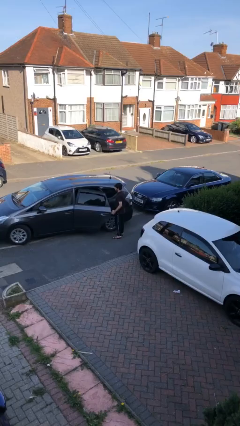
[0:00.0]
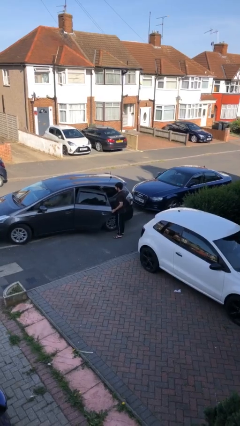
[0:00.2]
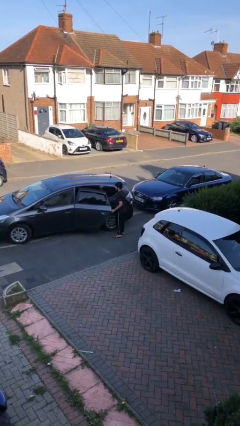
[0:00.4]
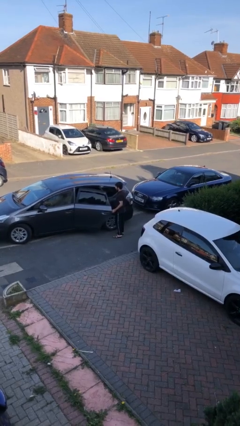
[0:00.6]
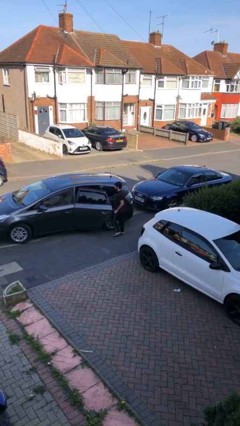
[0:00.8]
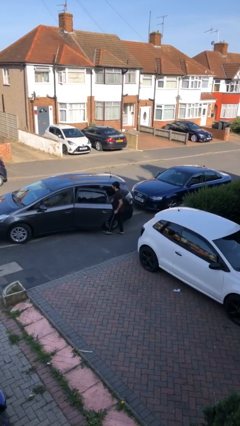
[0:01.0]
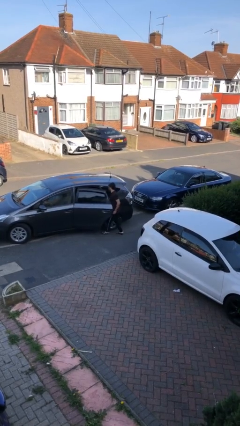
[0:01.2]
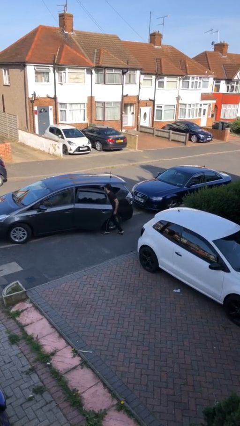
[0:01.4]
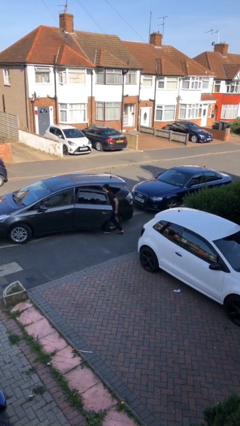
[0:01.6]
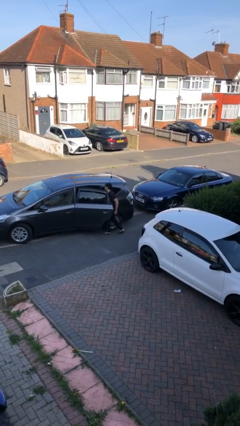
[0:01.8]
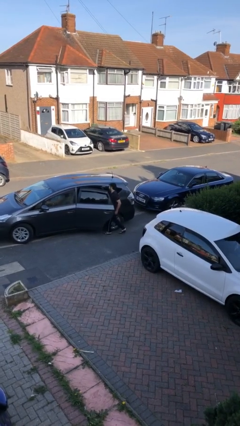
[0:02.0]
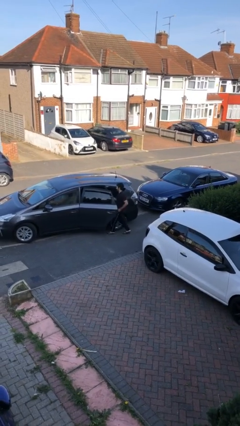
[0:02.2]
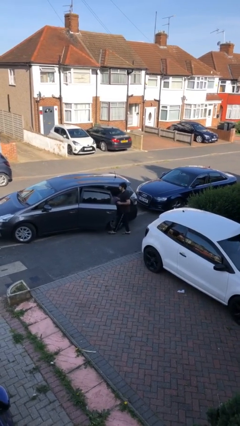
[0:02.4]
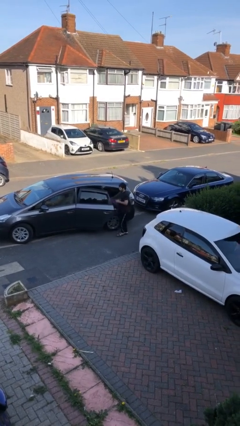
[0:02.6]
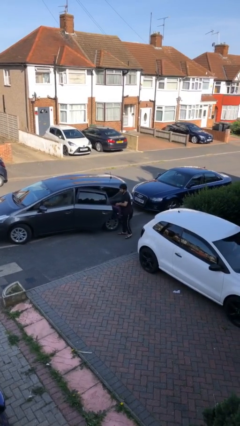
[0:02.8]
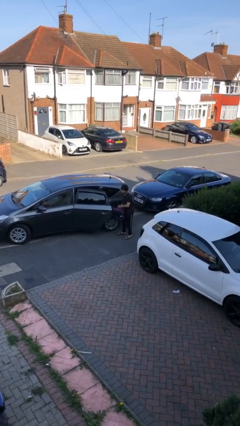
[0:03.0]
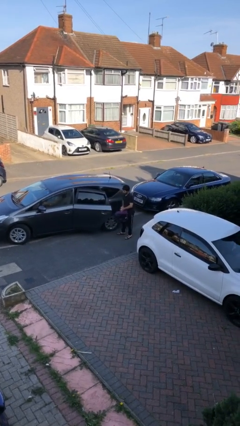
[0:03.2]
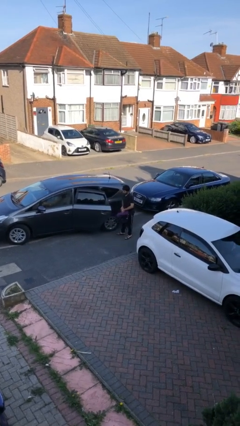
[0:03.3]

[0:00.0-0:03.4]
person unloads car

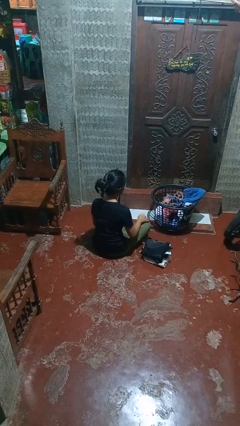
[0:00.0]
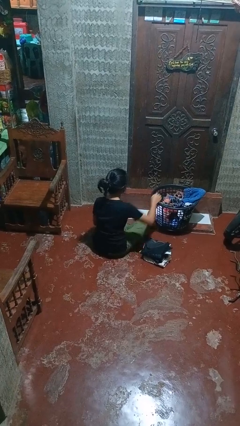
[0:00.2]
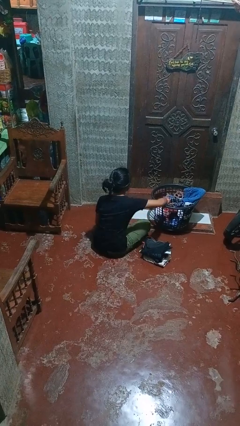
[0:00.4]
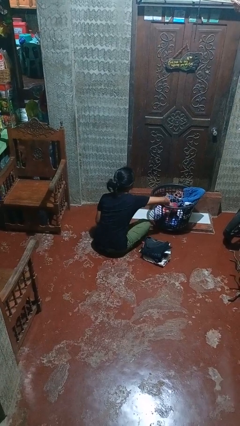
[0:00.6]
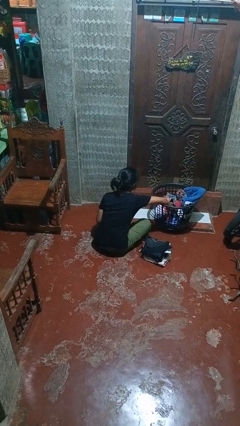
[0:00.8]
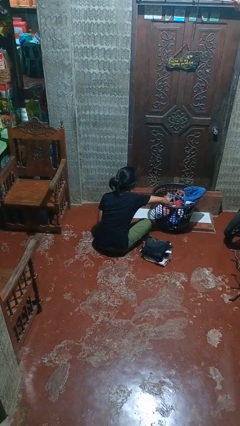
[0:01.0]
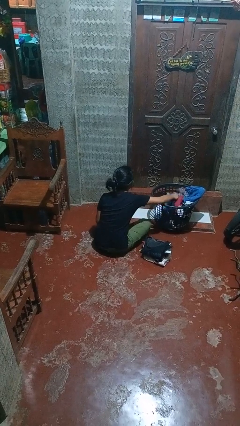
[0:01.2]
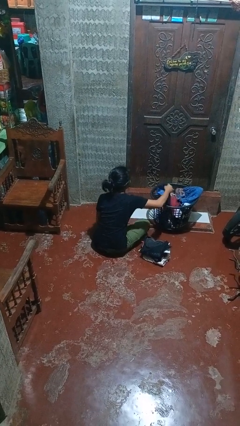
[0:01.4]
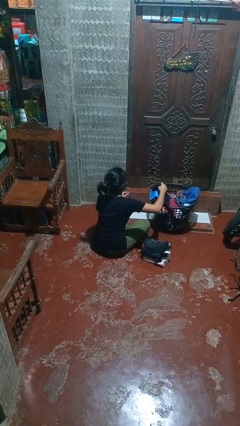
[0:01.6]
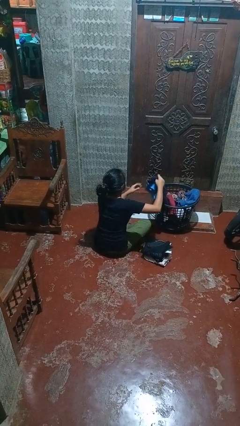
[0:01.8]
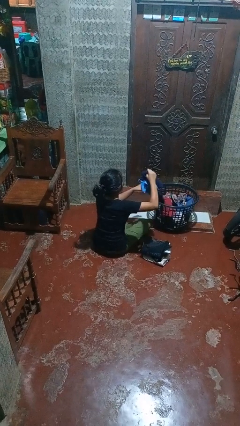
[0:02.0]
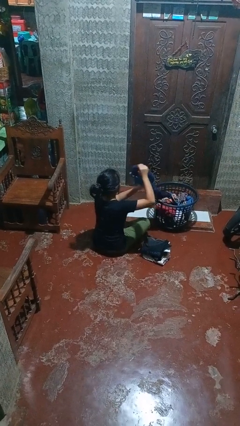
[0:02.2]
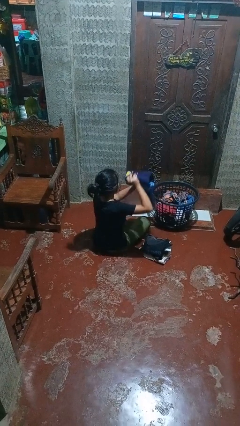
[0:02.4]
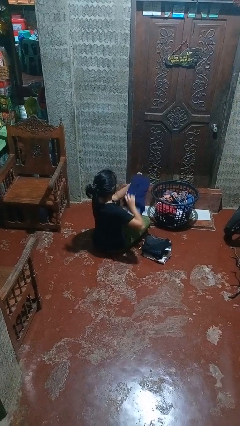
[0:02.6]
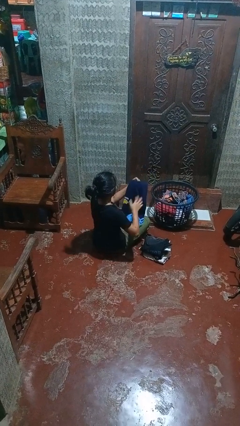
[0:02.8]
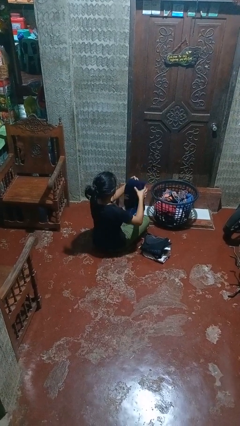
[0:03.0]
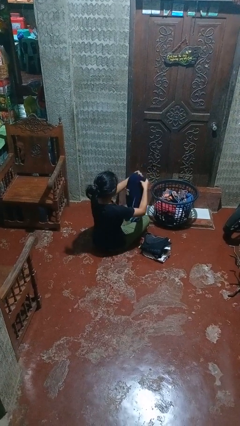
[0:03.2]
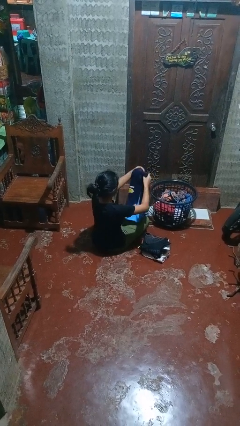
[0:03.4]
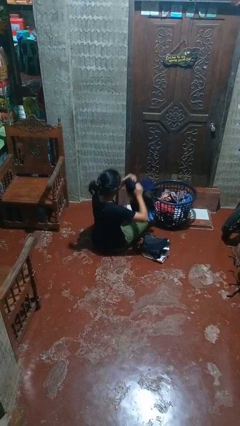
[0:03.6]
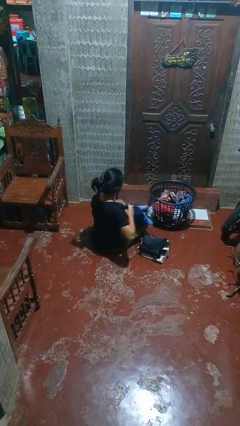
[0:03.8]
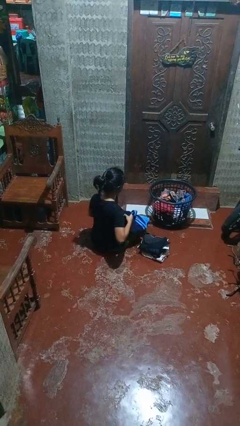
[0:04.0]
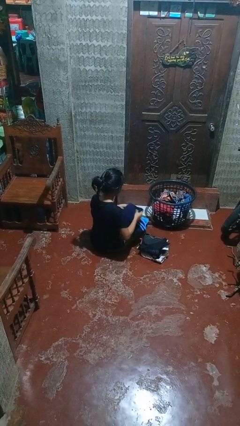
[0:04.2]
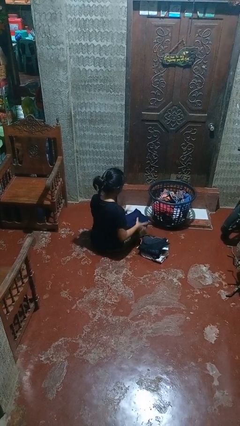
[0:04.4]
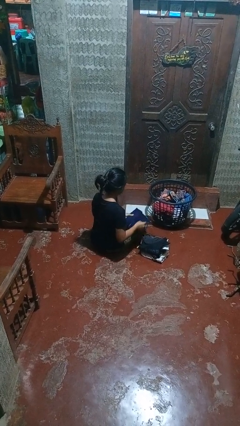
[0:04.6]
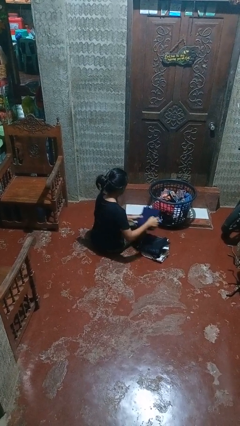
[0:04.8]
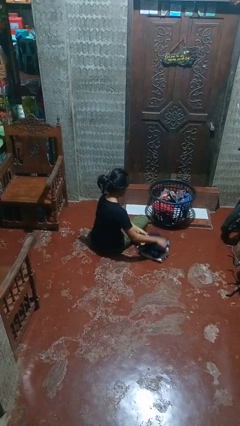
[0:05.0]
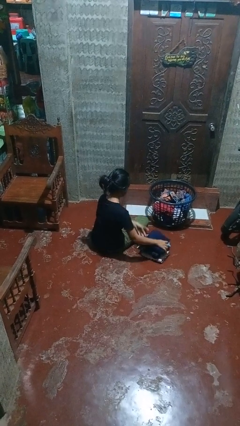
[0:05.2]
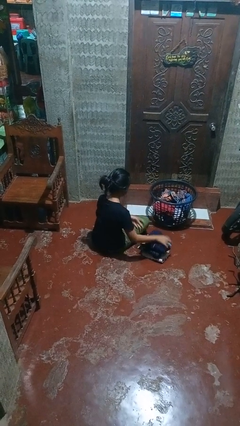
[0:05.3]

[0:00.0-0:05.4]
person folds shirt

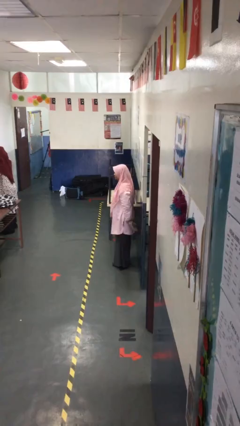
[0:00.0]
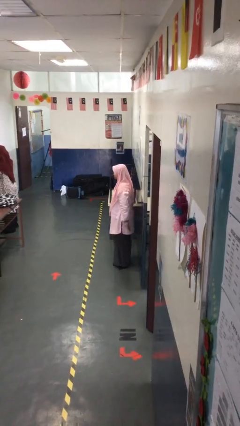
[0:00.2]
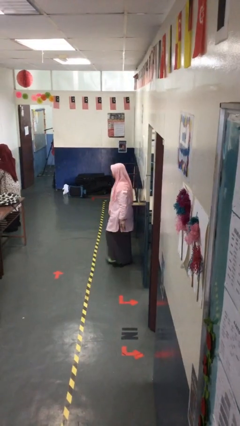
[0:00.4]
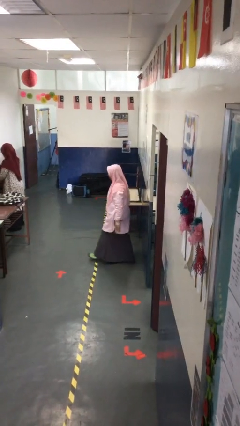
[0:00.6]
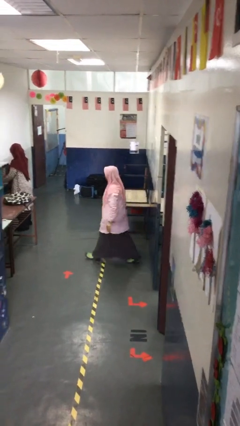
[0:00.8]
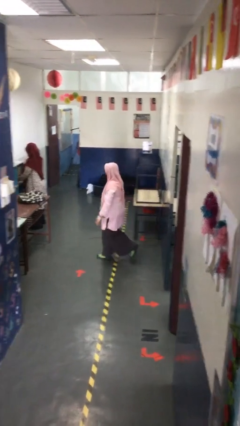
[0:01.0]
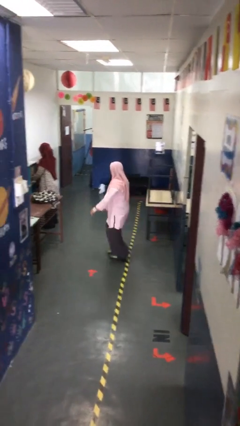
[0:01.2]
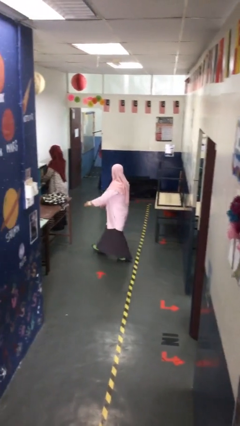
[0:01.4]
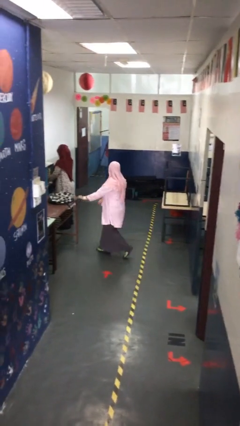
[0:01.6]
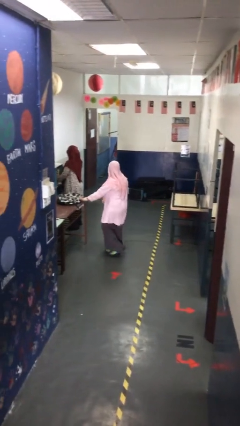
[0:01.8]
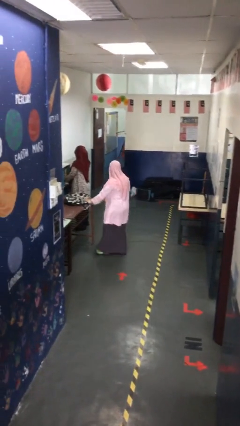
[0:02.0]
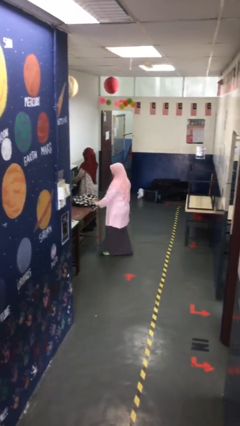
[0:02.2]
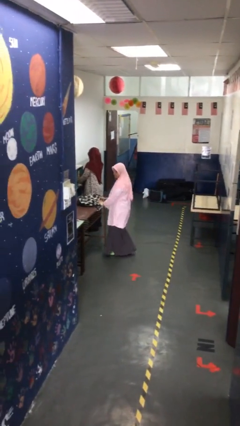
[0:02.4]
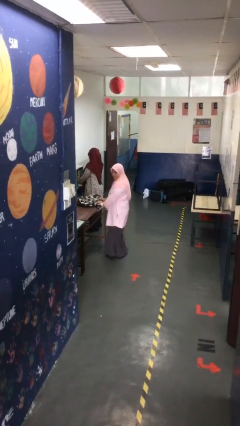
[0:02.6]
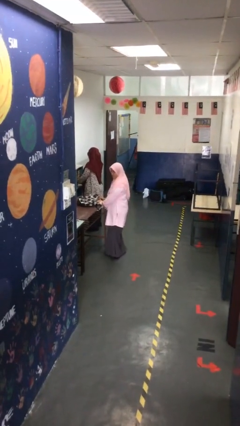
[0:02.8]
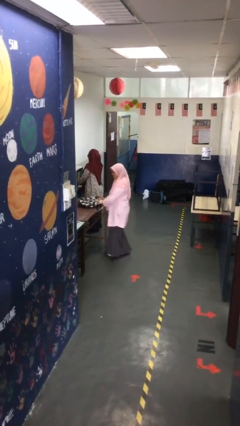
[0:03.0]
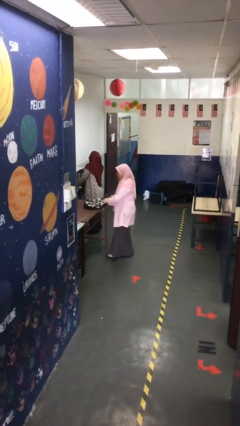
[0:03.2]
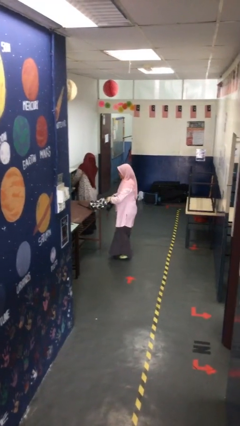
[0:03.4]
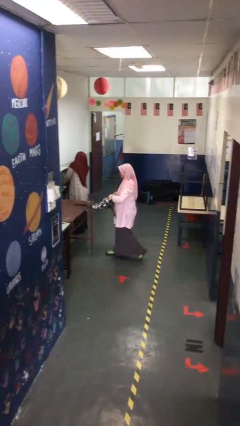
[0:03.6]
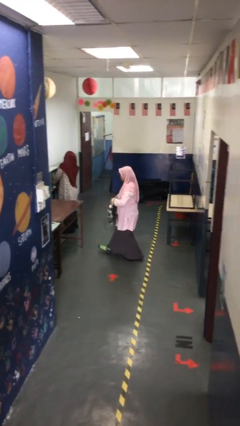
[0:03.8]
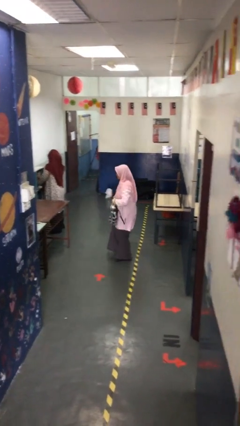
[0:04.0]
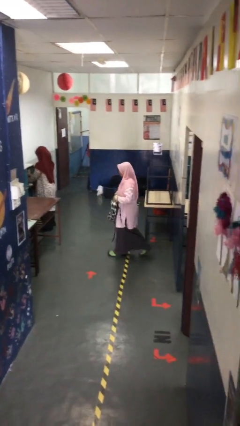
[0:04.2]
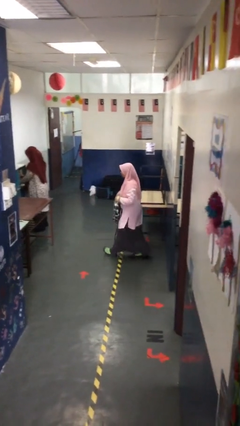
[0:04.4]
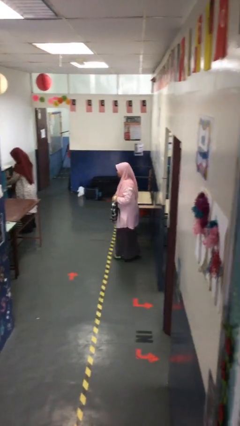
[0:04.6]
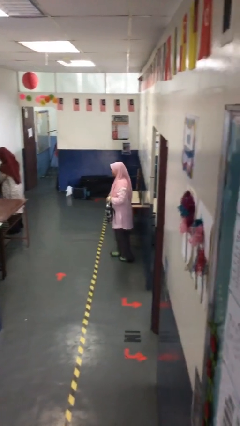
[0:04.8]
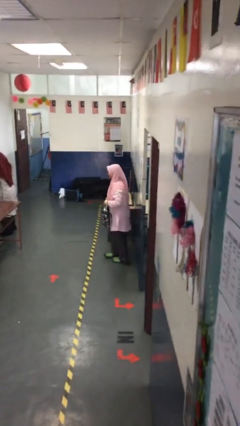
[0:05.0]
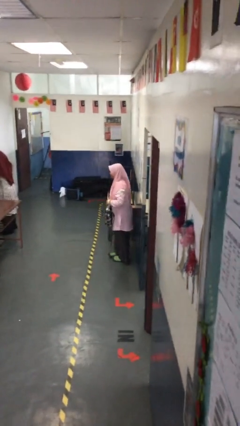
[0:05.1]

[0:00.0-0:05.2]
person steals object from person

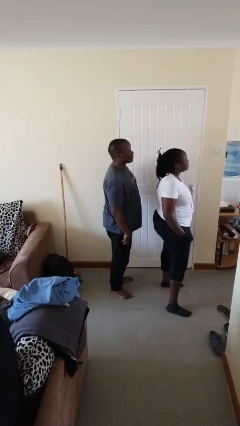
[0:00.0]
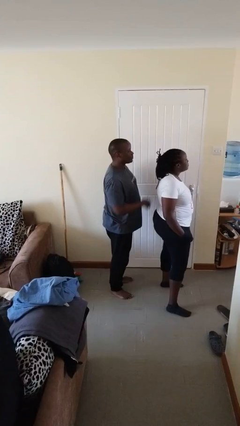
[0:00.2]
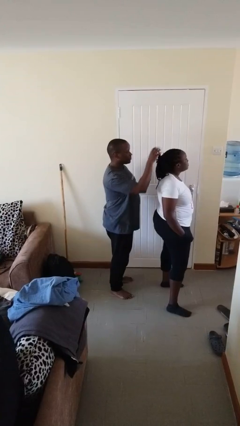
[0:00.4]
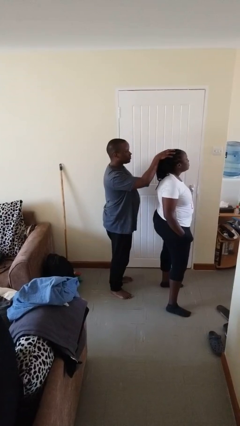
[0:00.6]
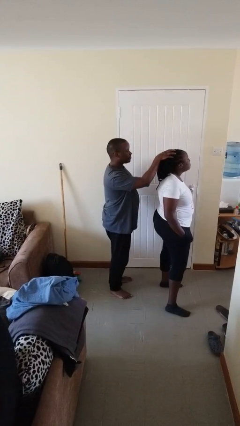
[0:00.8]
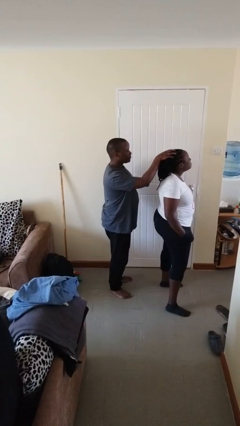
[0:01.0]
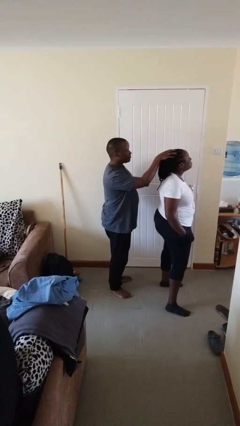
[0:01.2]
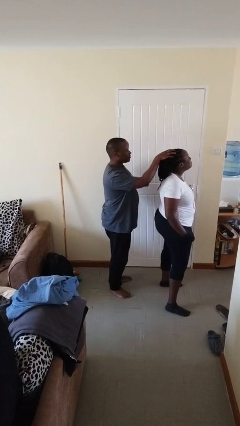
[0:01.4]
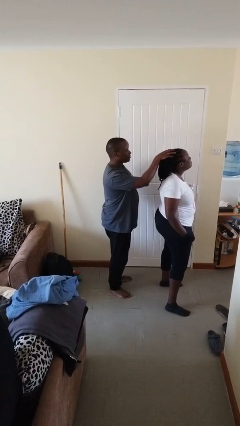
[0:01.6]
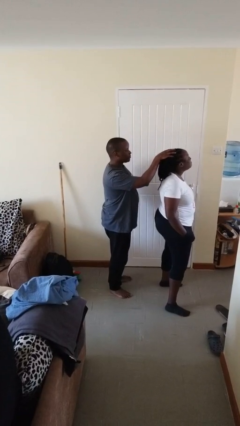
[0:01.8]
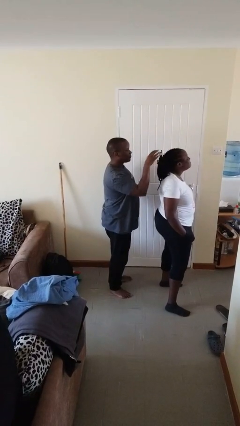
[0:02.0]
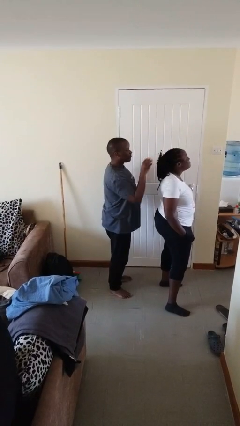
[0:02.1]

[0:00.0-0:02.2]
person grabs person by hair

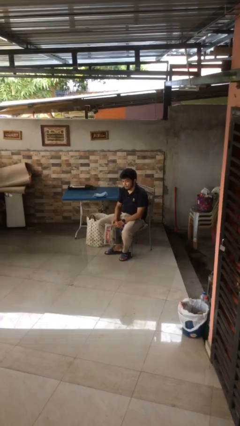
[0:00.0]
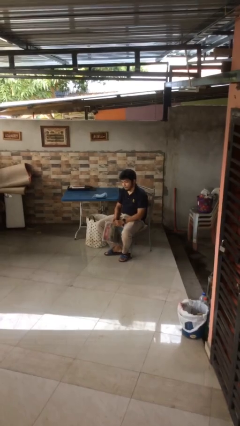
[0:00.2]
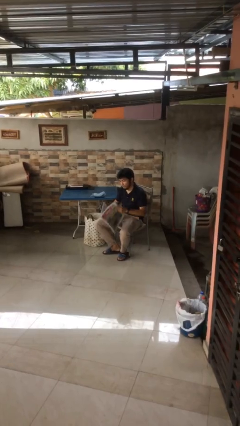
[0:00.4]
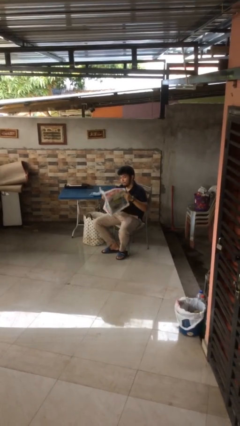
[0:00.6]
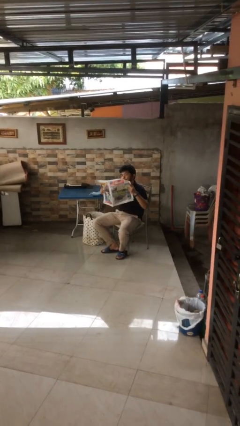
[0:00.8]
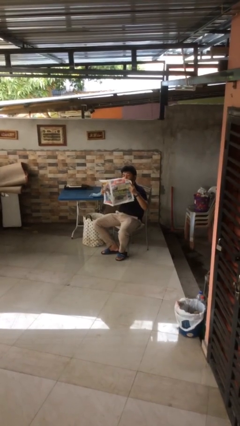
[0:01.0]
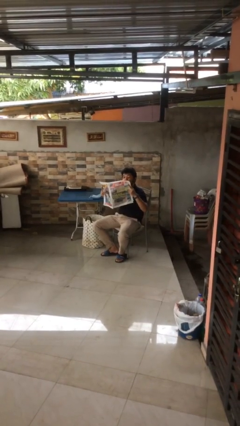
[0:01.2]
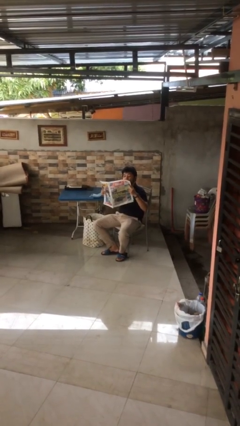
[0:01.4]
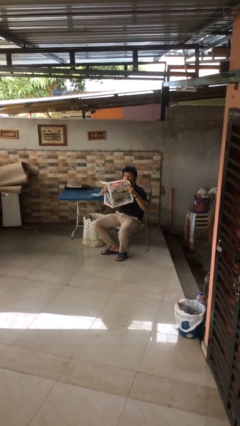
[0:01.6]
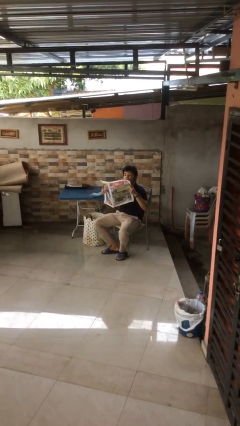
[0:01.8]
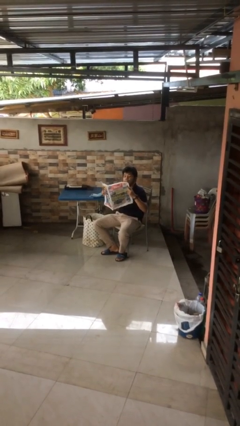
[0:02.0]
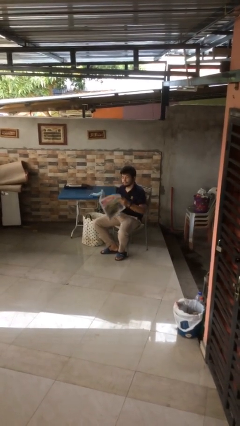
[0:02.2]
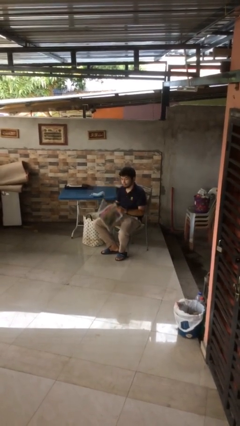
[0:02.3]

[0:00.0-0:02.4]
person reads newspaper
